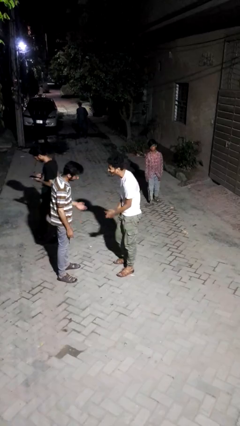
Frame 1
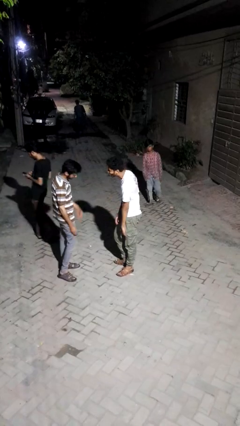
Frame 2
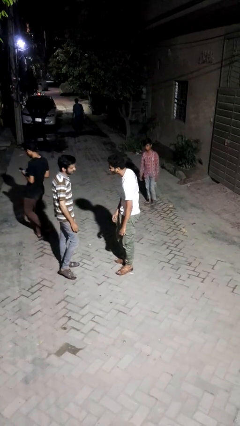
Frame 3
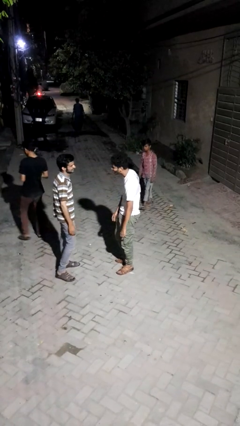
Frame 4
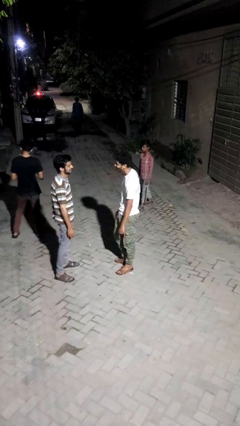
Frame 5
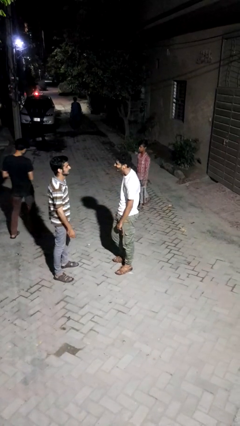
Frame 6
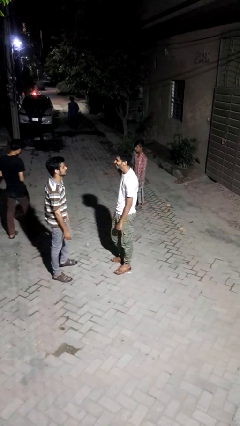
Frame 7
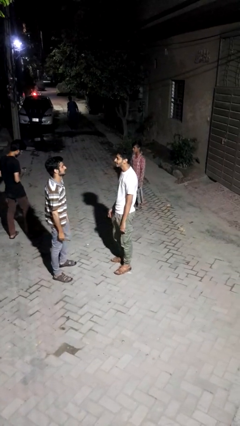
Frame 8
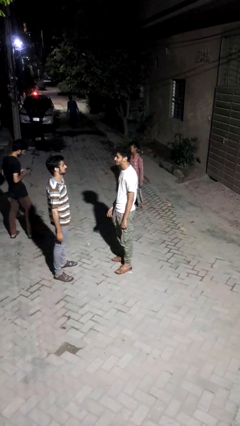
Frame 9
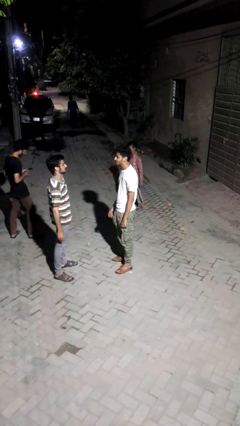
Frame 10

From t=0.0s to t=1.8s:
person laughs with person

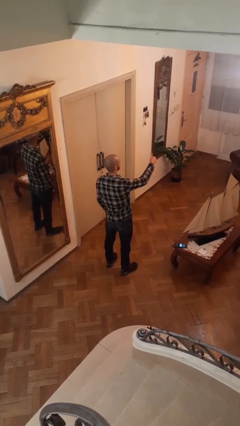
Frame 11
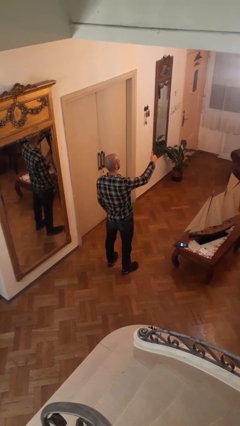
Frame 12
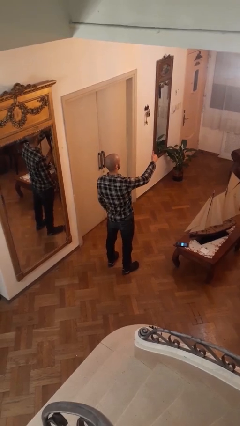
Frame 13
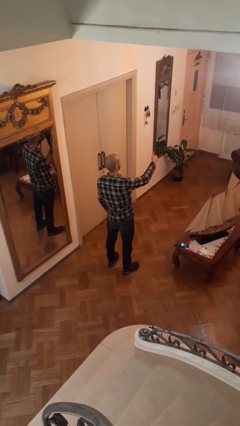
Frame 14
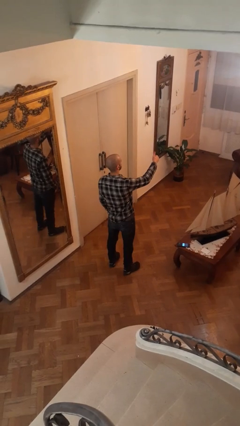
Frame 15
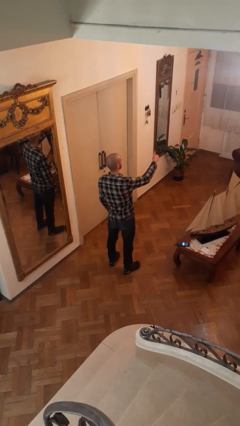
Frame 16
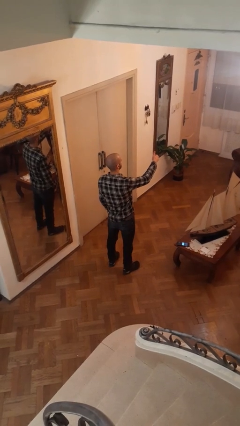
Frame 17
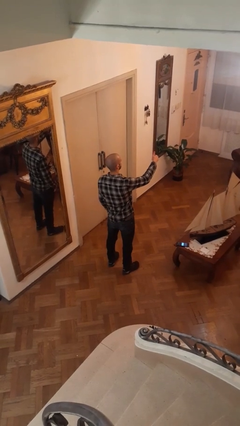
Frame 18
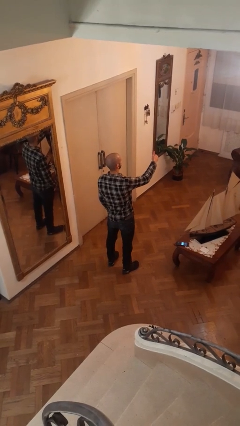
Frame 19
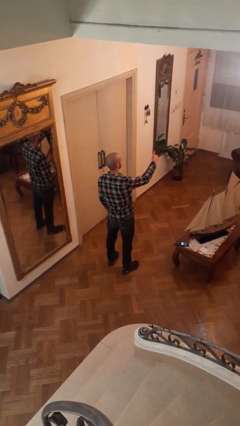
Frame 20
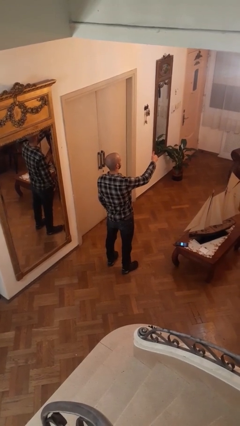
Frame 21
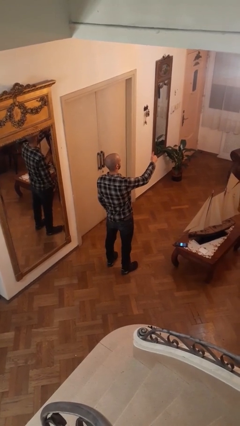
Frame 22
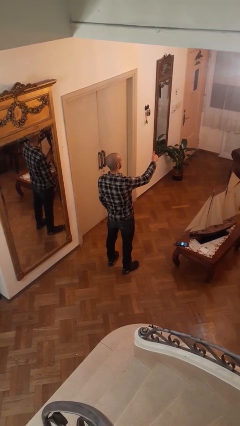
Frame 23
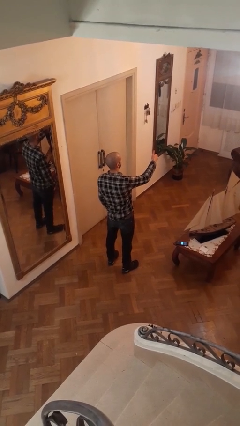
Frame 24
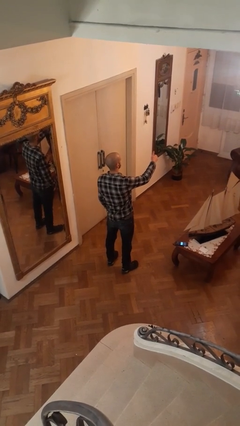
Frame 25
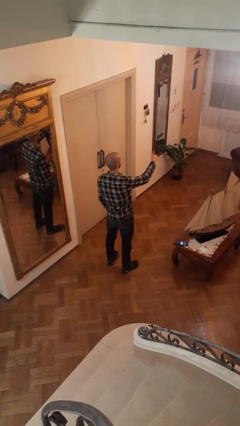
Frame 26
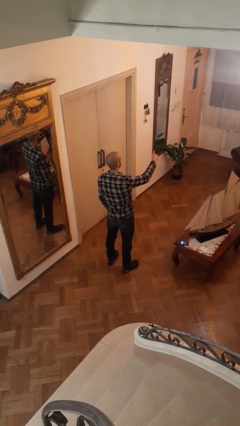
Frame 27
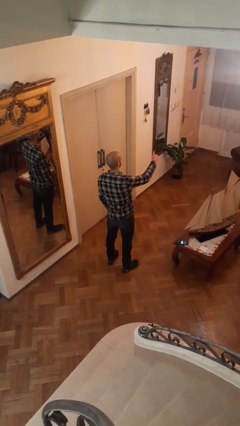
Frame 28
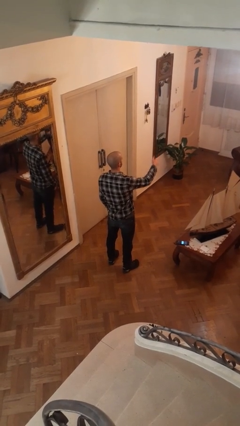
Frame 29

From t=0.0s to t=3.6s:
person gestures thumbs up

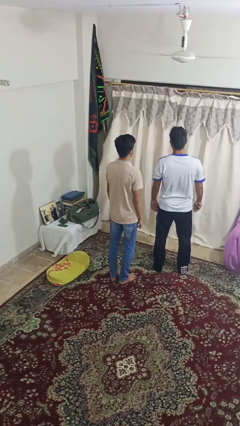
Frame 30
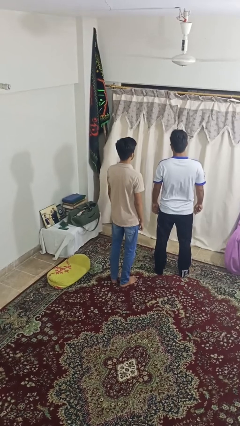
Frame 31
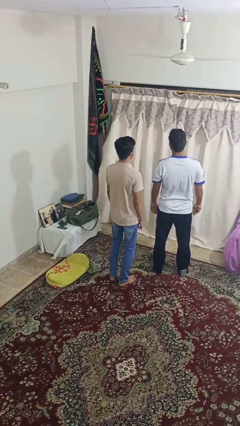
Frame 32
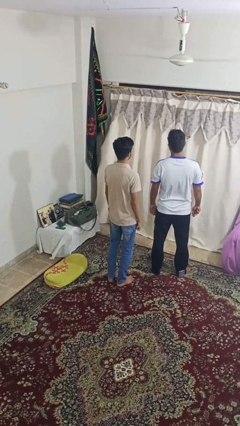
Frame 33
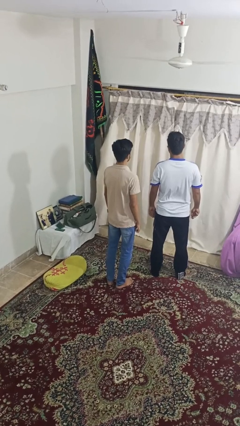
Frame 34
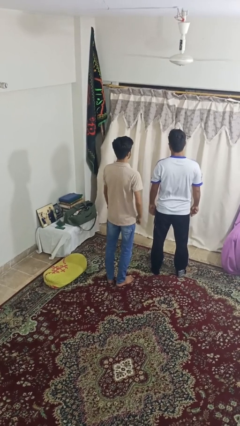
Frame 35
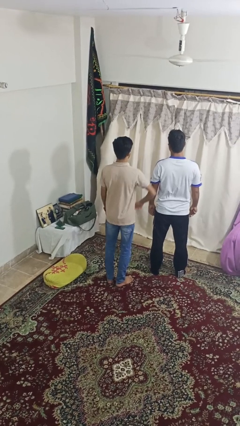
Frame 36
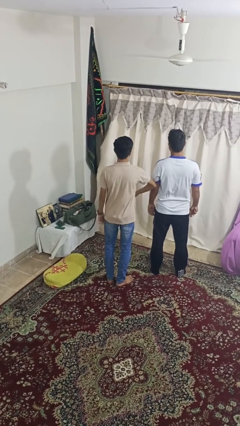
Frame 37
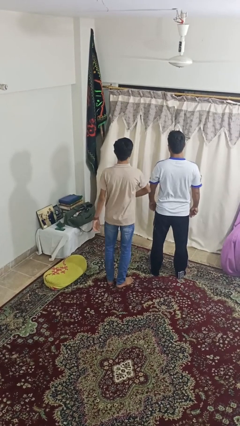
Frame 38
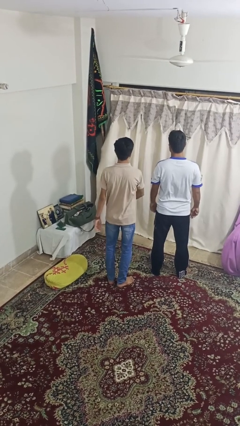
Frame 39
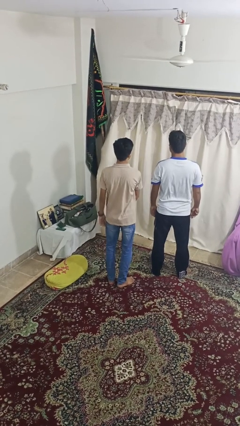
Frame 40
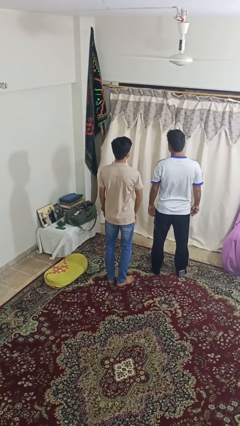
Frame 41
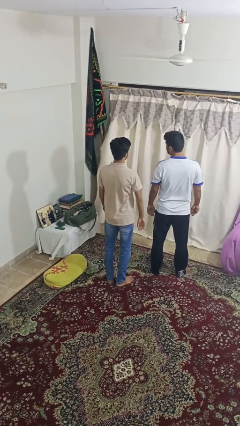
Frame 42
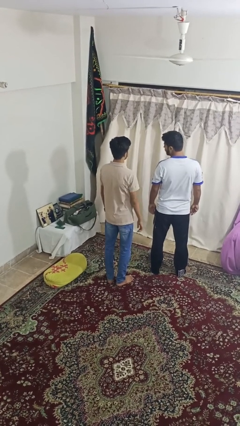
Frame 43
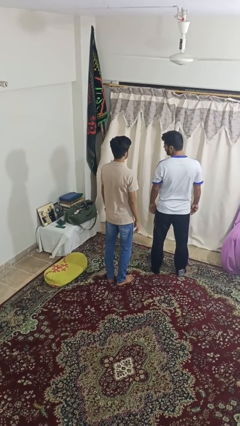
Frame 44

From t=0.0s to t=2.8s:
person nudges person with elbow

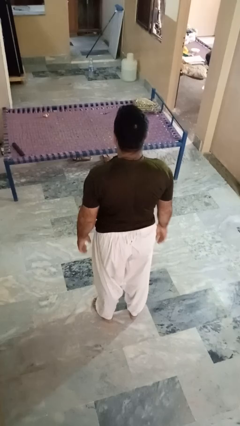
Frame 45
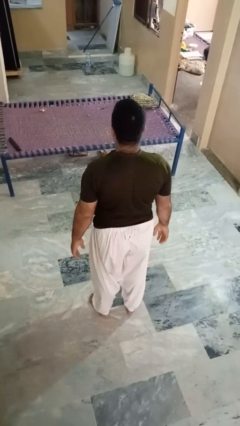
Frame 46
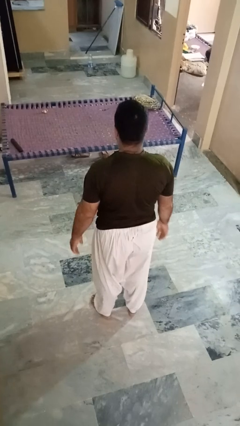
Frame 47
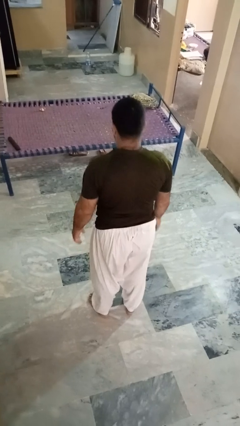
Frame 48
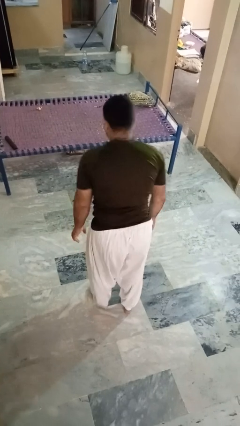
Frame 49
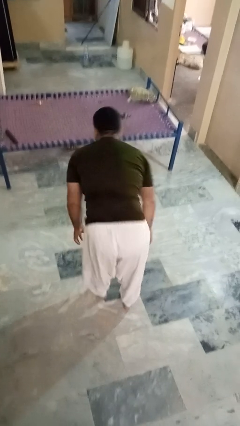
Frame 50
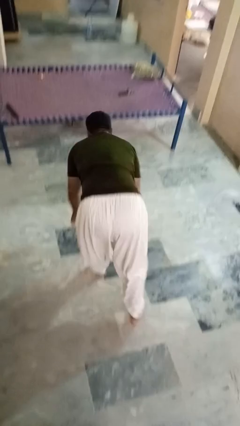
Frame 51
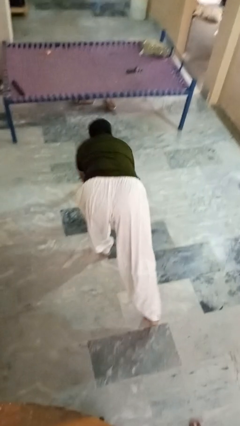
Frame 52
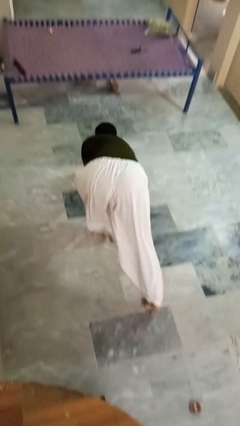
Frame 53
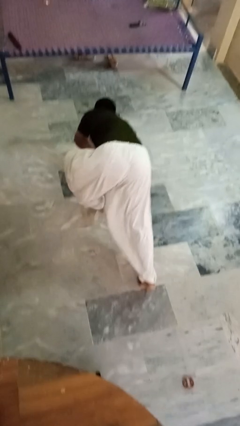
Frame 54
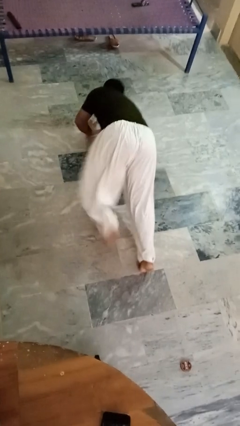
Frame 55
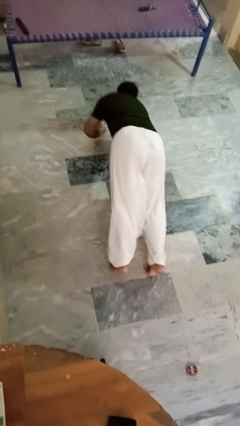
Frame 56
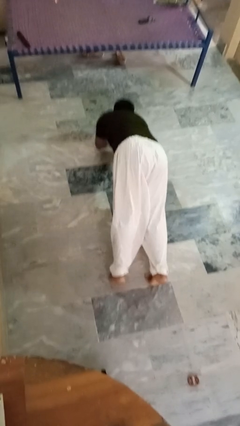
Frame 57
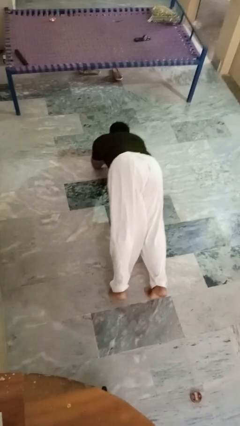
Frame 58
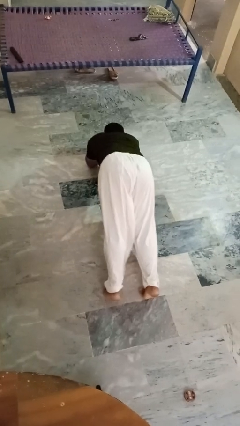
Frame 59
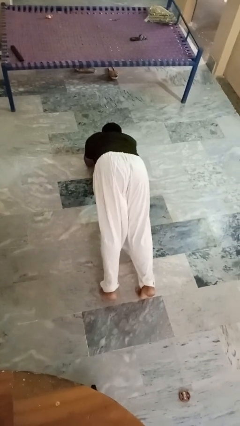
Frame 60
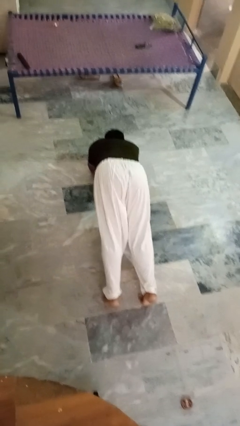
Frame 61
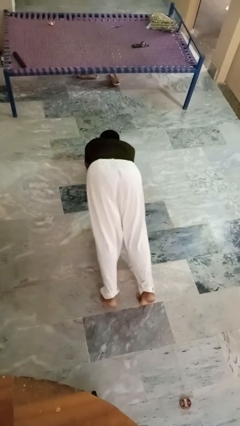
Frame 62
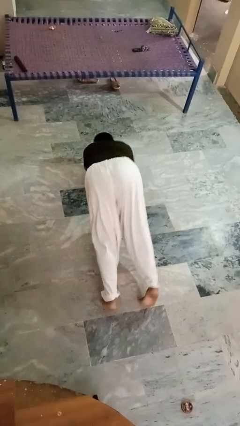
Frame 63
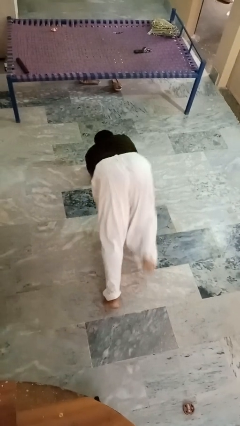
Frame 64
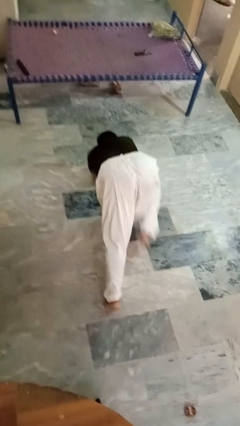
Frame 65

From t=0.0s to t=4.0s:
person exercises with plank

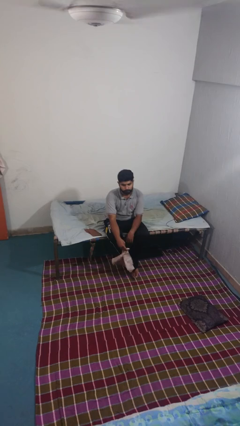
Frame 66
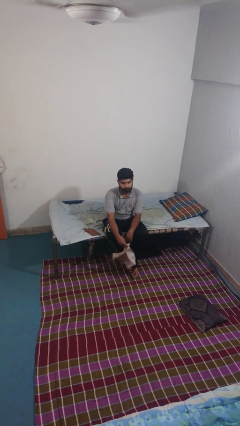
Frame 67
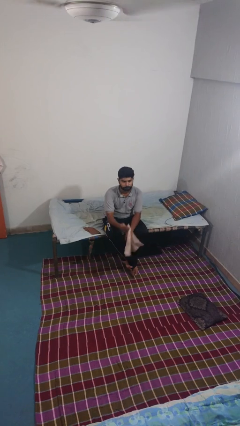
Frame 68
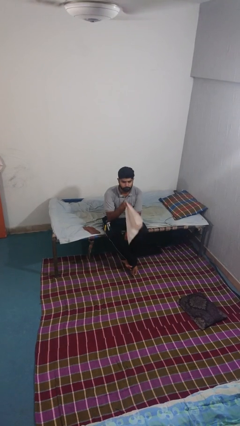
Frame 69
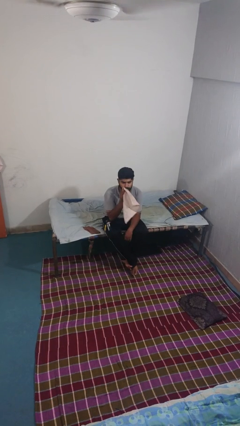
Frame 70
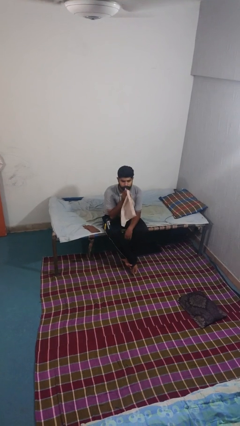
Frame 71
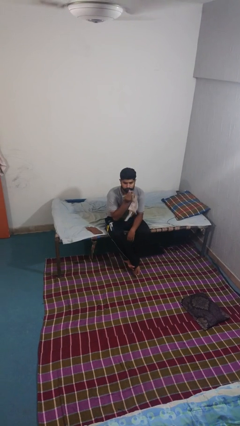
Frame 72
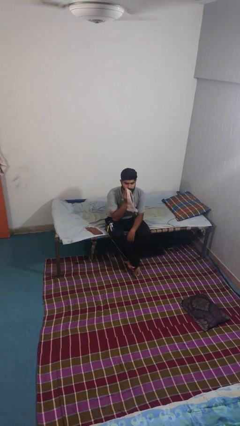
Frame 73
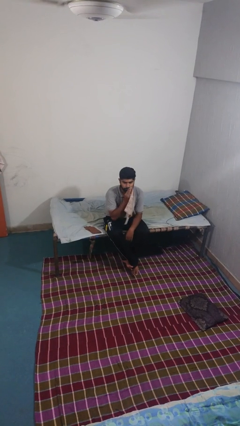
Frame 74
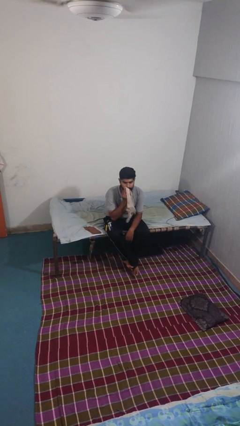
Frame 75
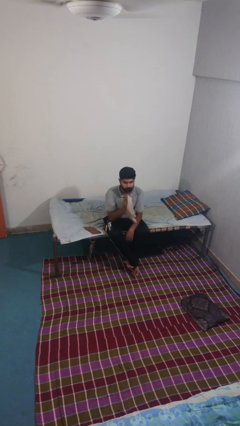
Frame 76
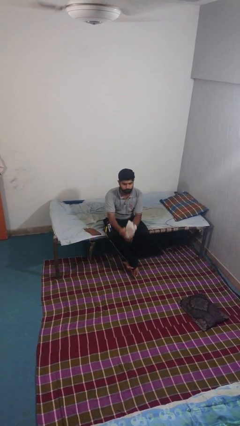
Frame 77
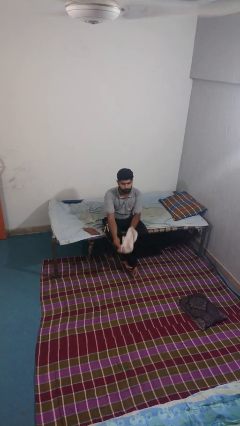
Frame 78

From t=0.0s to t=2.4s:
person wipes mouth with napkin

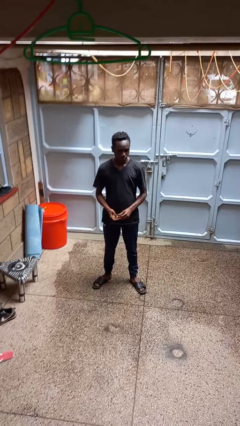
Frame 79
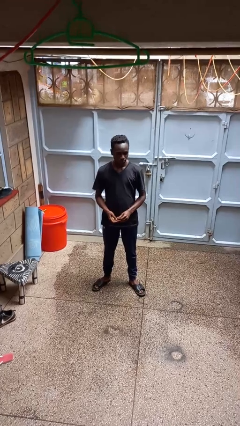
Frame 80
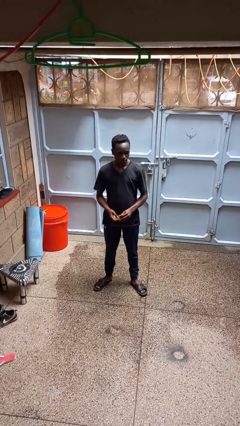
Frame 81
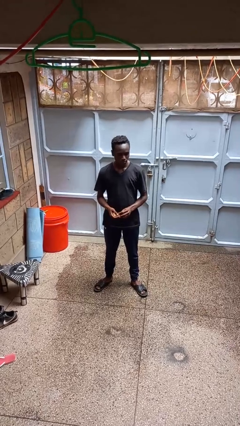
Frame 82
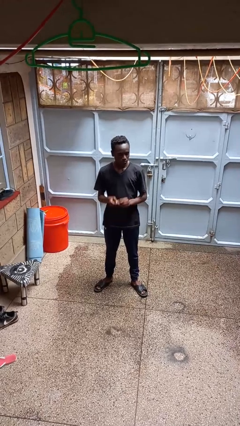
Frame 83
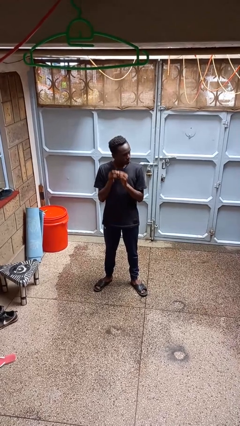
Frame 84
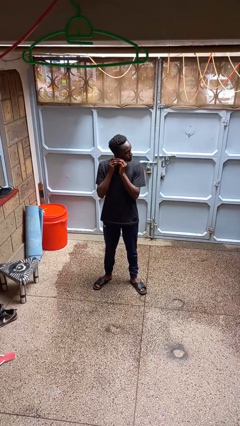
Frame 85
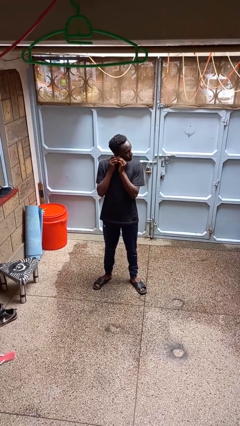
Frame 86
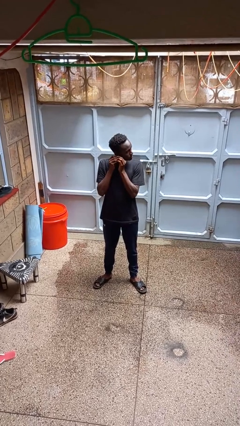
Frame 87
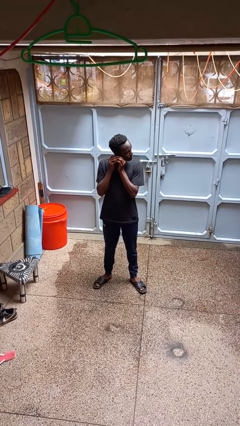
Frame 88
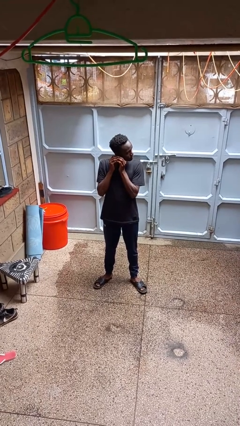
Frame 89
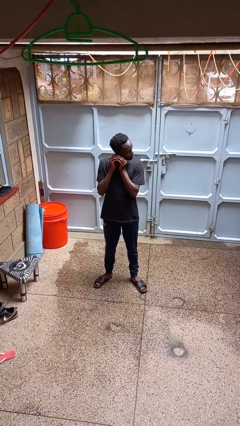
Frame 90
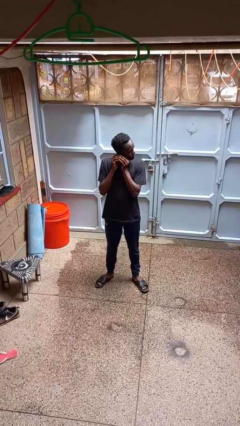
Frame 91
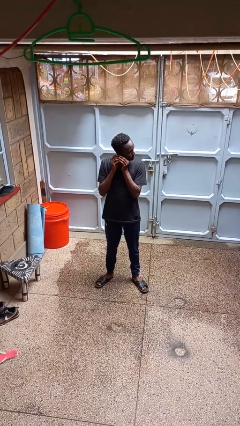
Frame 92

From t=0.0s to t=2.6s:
person puts on earrings

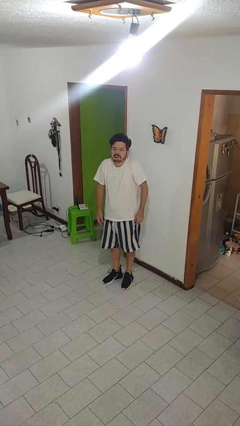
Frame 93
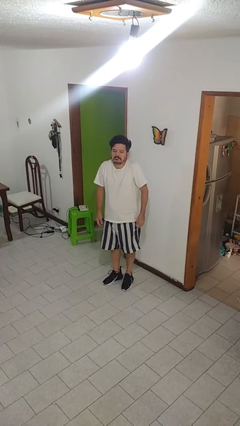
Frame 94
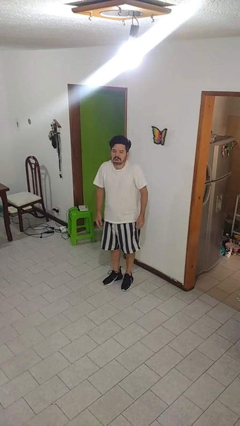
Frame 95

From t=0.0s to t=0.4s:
person shrugs
